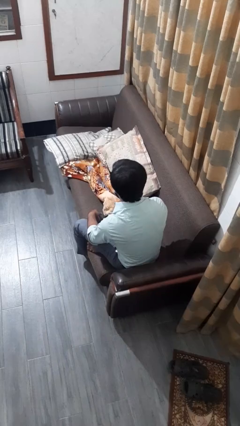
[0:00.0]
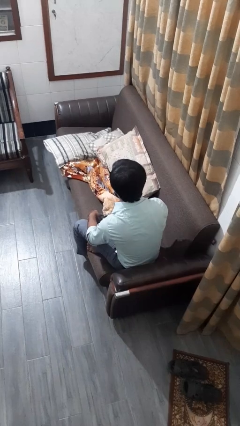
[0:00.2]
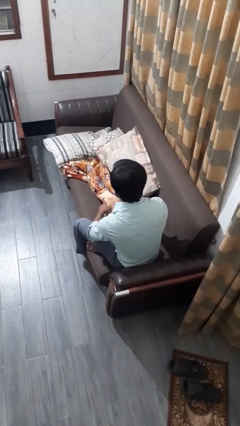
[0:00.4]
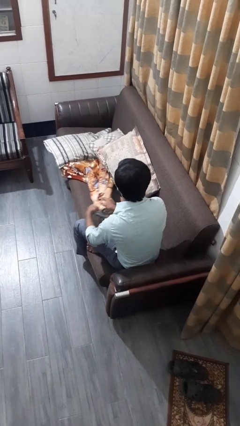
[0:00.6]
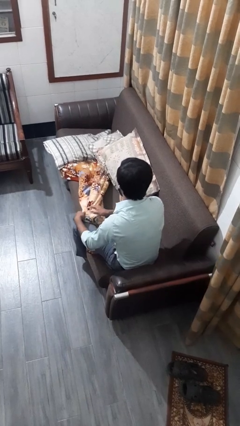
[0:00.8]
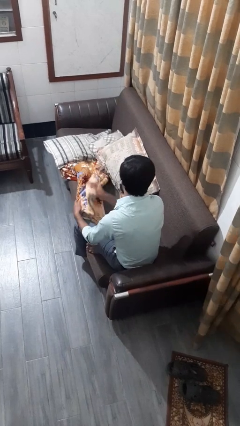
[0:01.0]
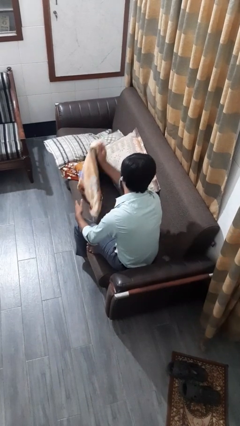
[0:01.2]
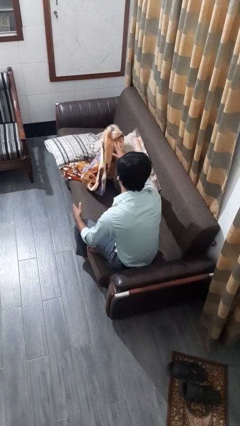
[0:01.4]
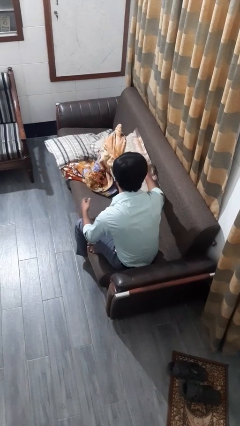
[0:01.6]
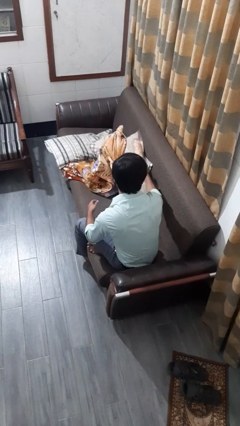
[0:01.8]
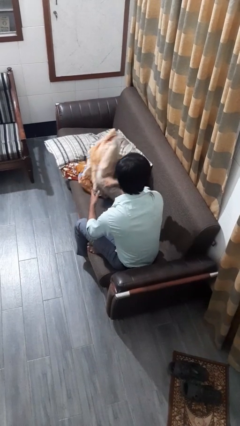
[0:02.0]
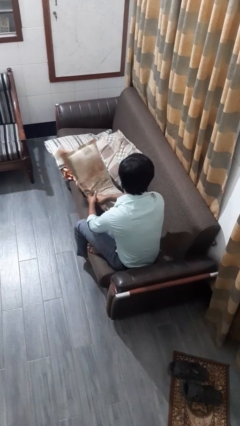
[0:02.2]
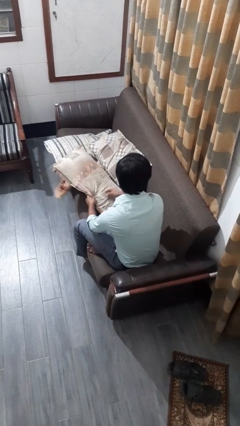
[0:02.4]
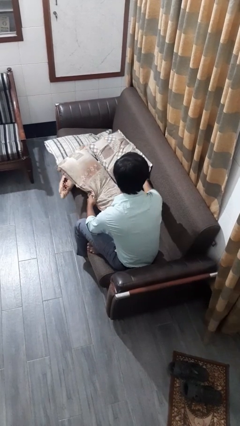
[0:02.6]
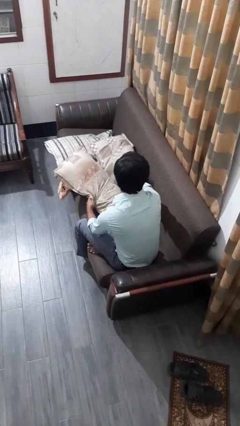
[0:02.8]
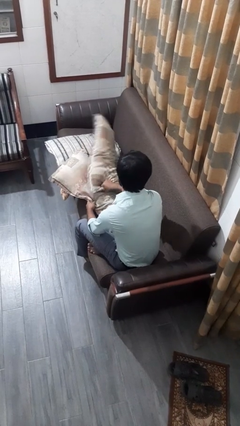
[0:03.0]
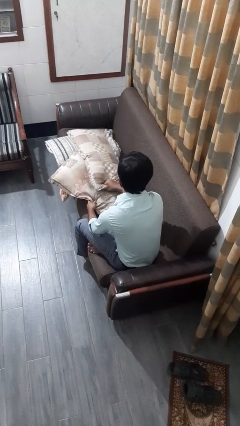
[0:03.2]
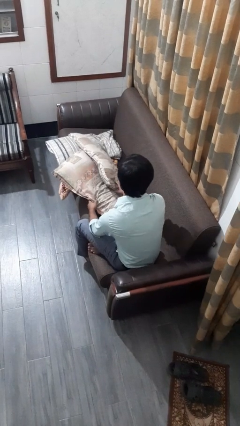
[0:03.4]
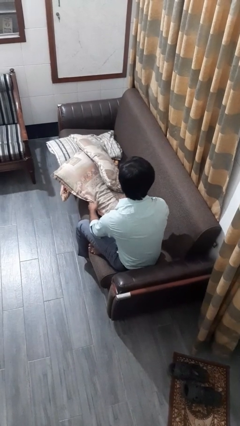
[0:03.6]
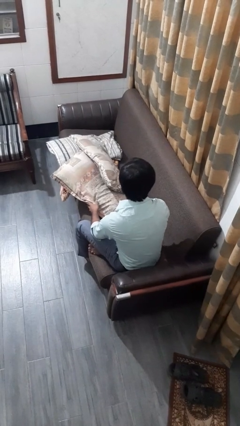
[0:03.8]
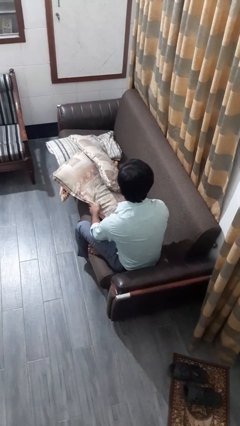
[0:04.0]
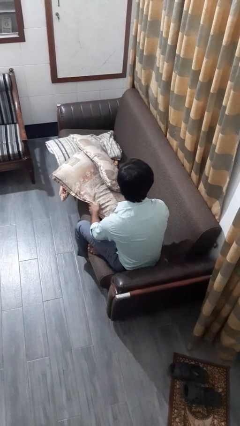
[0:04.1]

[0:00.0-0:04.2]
person searches in couch

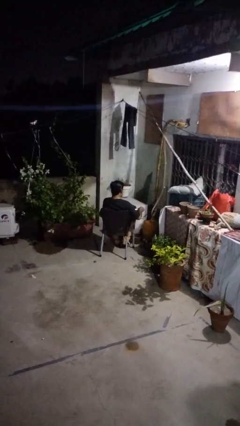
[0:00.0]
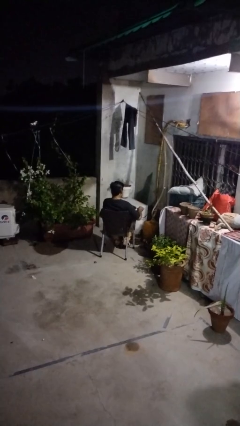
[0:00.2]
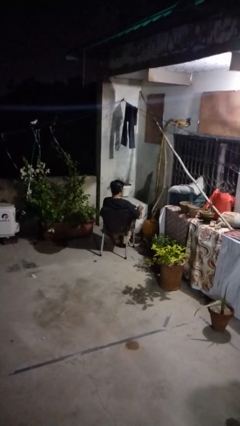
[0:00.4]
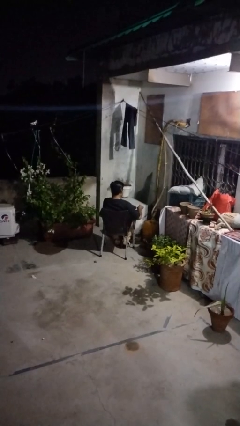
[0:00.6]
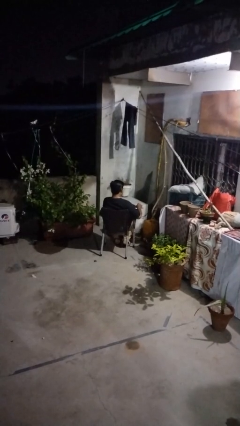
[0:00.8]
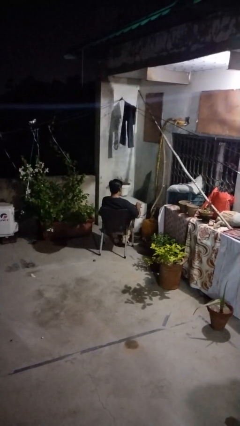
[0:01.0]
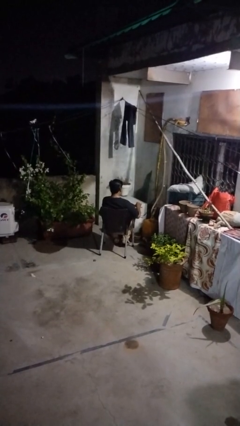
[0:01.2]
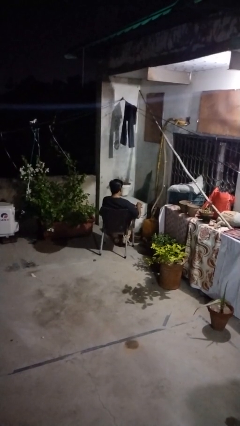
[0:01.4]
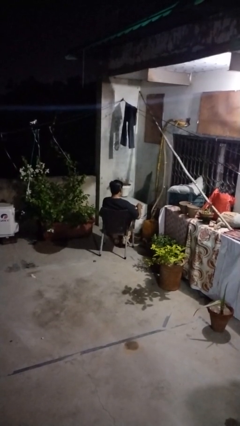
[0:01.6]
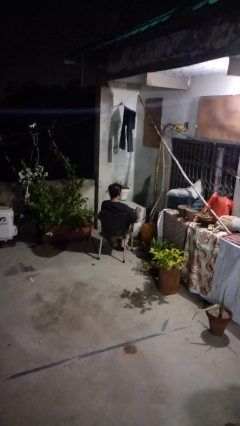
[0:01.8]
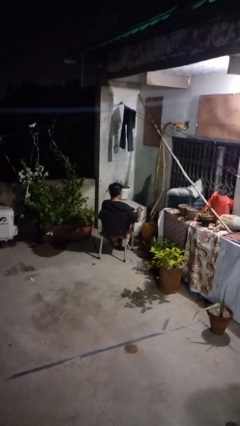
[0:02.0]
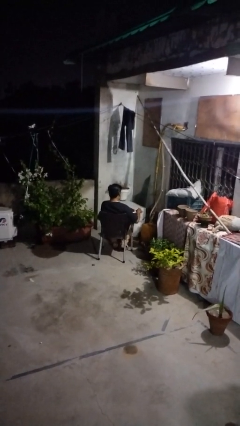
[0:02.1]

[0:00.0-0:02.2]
person stirs mug

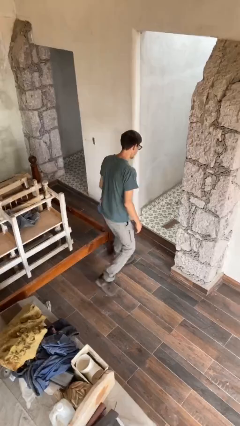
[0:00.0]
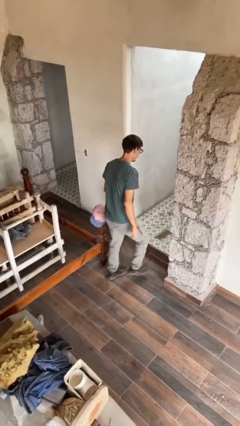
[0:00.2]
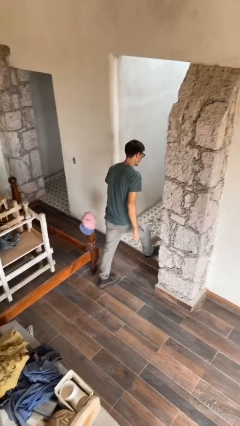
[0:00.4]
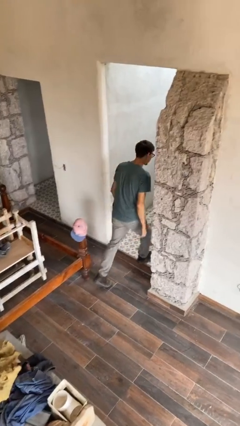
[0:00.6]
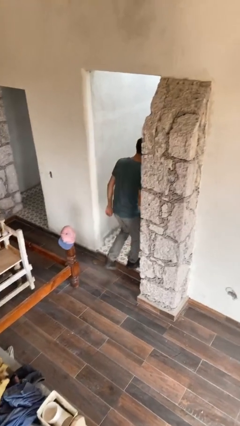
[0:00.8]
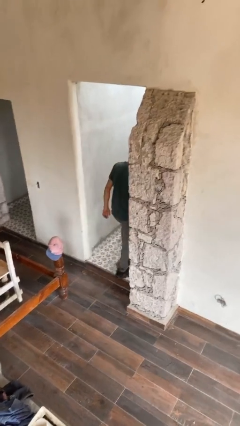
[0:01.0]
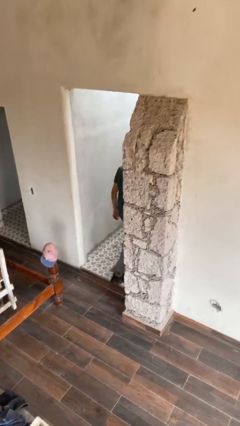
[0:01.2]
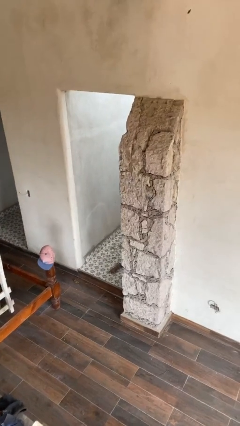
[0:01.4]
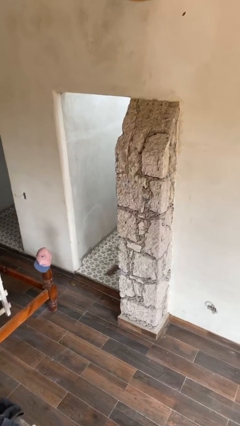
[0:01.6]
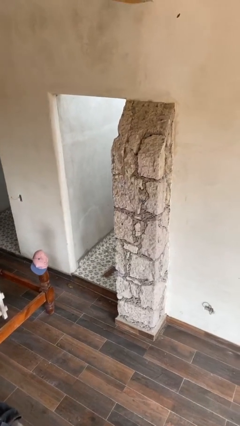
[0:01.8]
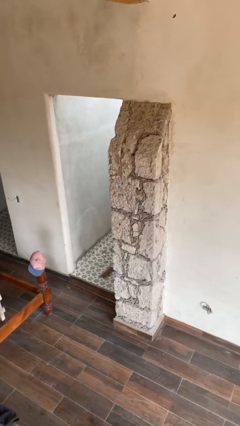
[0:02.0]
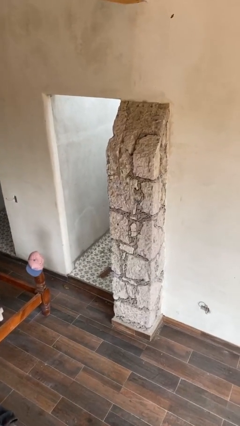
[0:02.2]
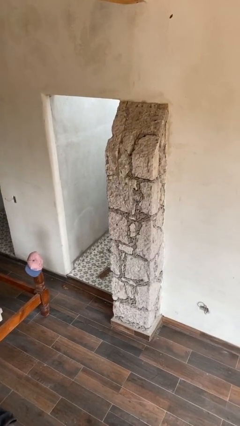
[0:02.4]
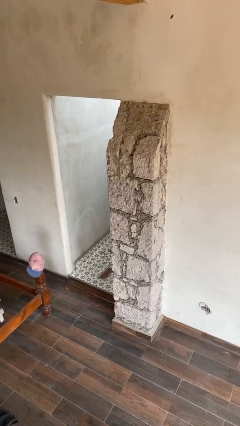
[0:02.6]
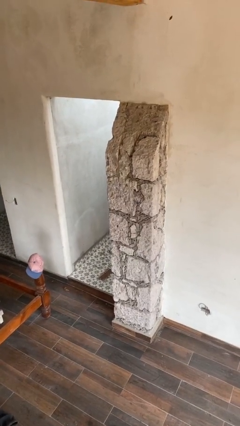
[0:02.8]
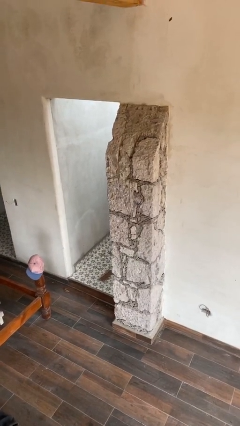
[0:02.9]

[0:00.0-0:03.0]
person exits scene through structure

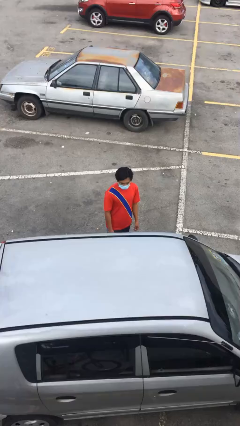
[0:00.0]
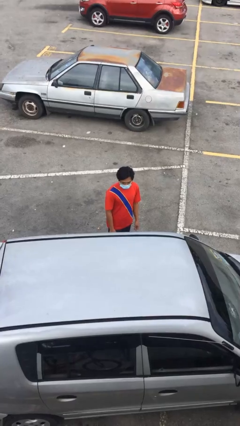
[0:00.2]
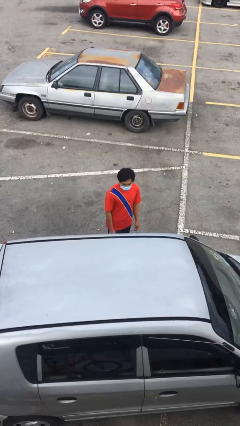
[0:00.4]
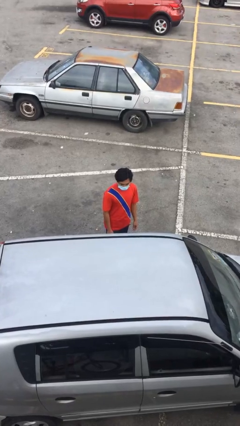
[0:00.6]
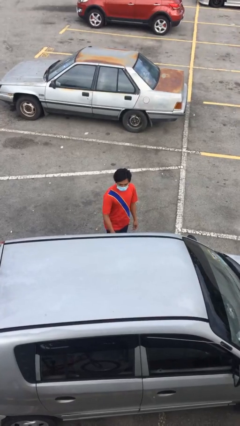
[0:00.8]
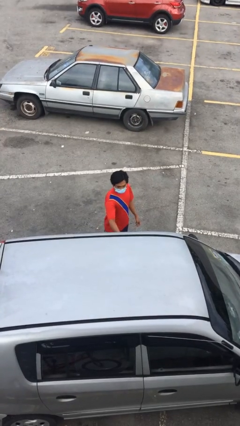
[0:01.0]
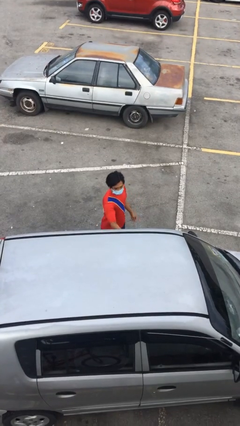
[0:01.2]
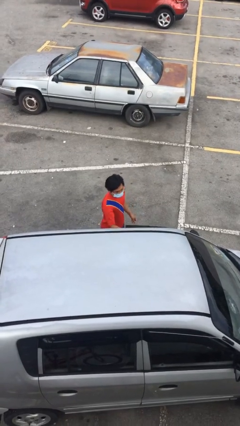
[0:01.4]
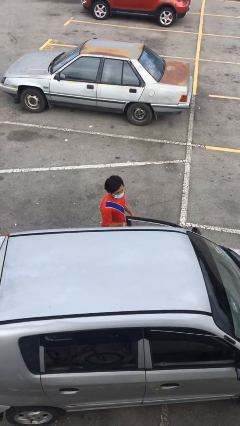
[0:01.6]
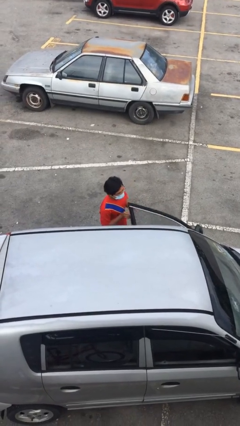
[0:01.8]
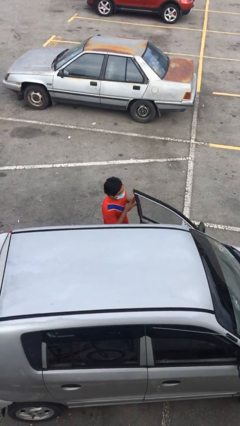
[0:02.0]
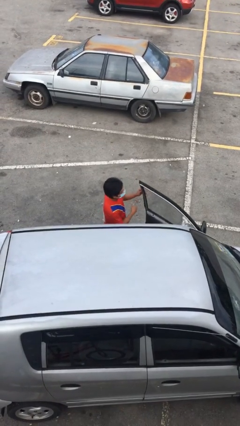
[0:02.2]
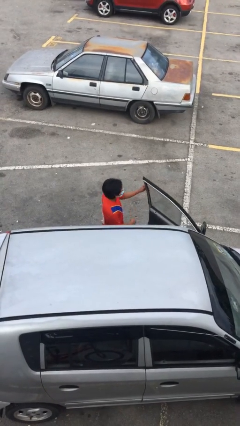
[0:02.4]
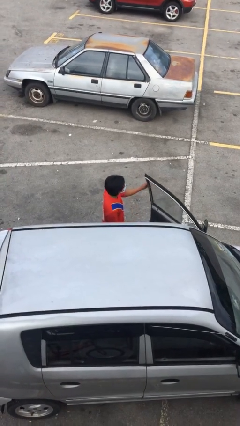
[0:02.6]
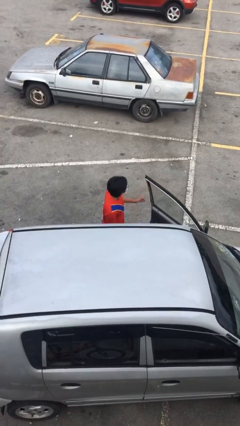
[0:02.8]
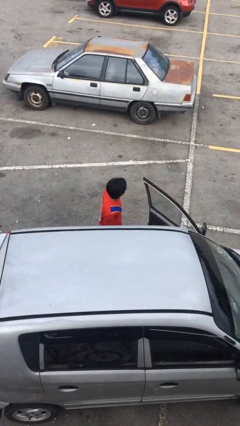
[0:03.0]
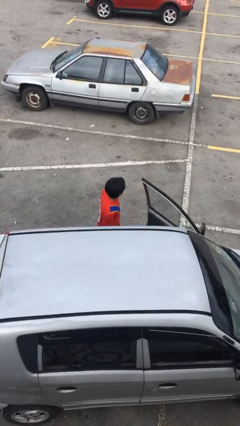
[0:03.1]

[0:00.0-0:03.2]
person opens car door

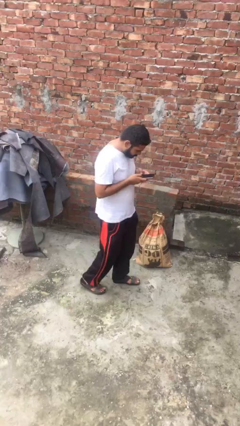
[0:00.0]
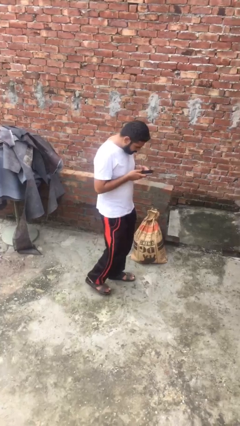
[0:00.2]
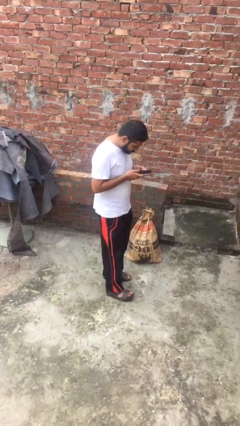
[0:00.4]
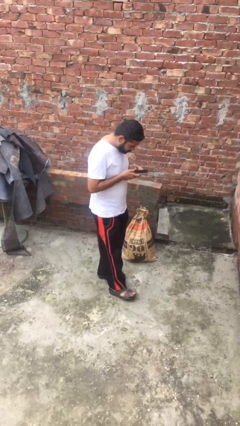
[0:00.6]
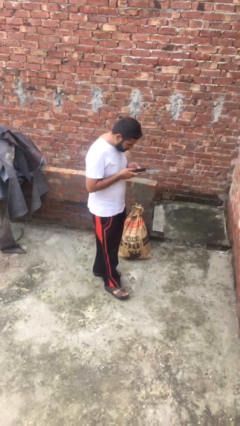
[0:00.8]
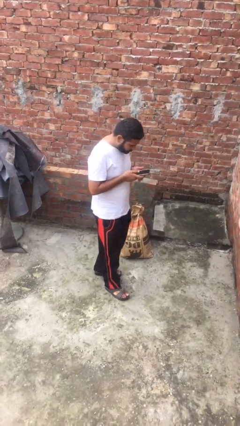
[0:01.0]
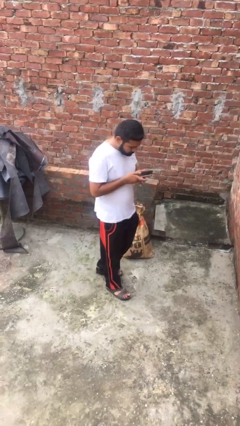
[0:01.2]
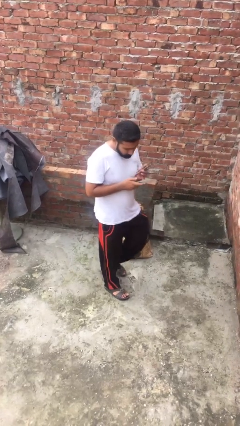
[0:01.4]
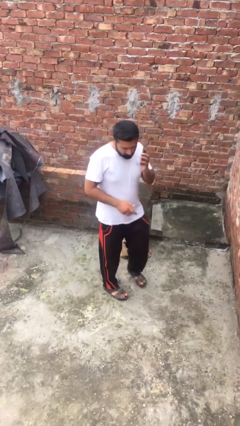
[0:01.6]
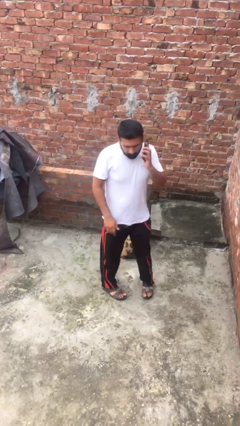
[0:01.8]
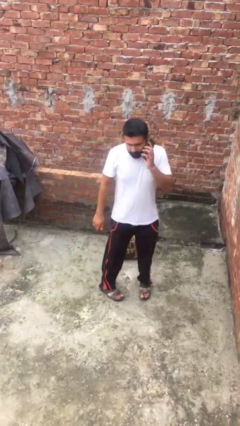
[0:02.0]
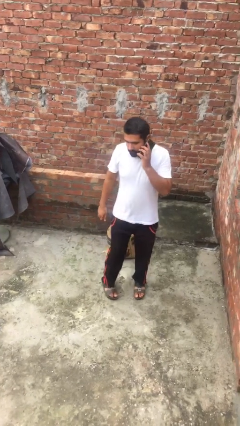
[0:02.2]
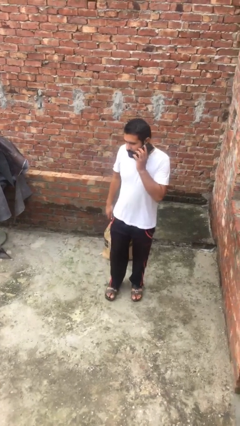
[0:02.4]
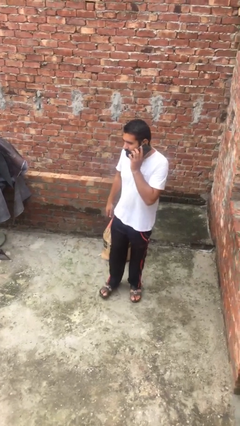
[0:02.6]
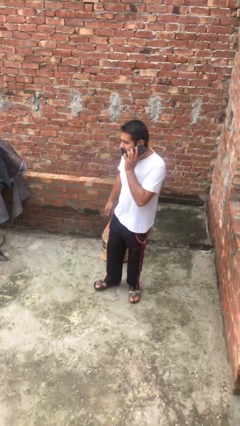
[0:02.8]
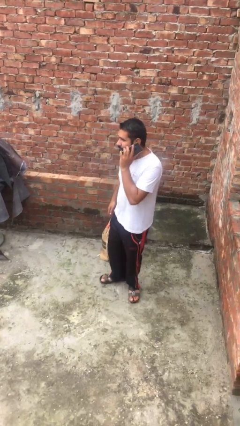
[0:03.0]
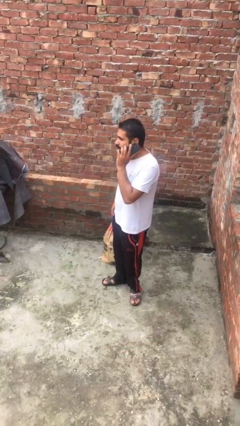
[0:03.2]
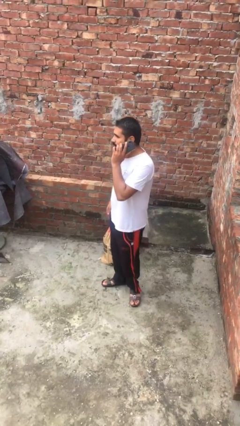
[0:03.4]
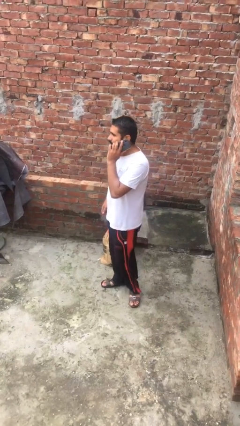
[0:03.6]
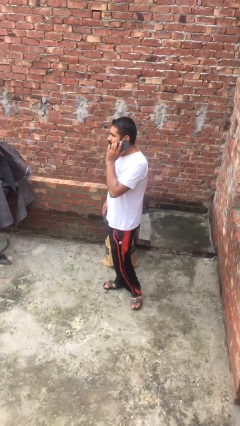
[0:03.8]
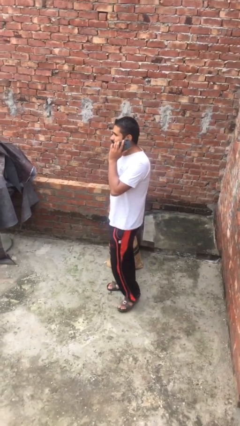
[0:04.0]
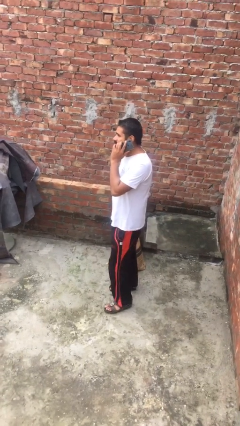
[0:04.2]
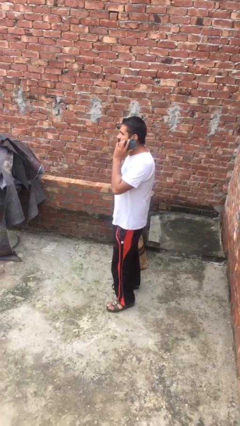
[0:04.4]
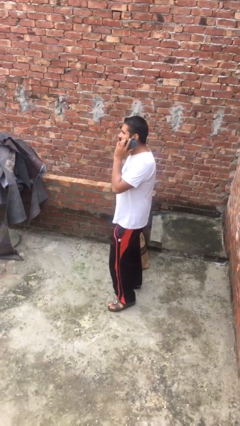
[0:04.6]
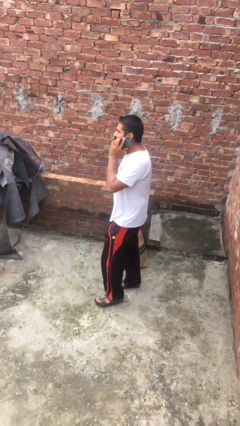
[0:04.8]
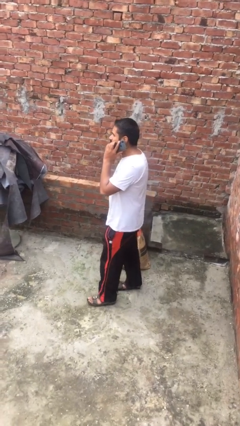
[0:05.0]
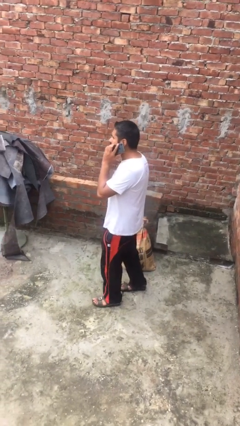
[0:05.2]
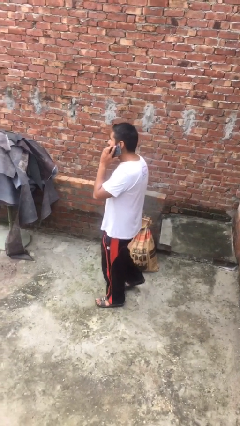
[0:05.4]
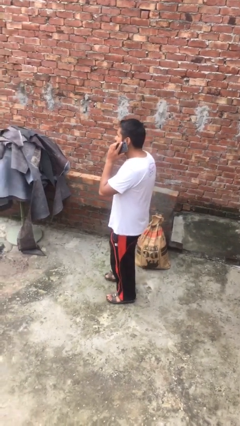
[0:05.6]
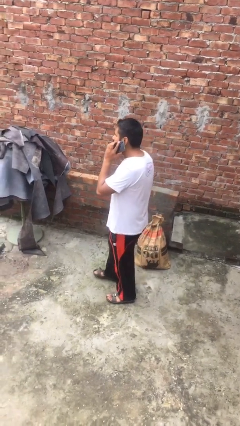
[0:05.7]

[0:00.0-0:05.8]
person talks on phone
